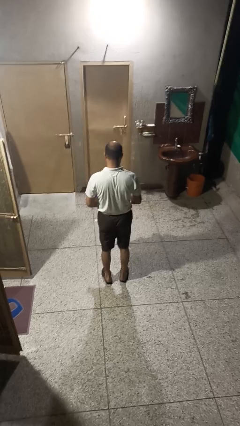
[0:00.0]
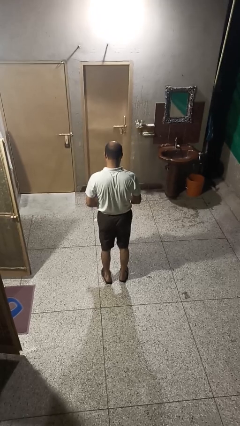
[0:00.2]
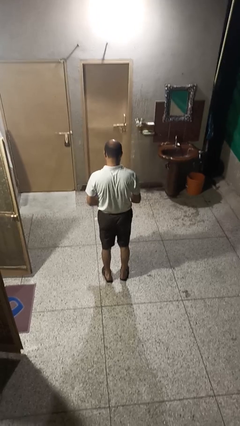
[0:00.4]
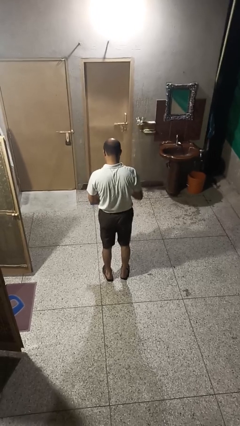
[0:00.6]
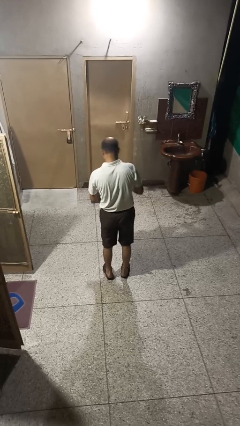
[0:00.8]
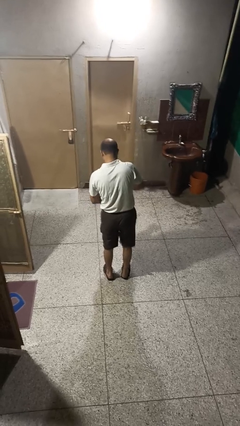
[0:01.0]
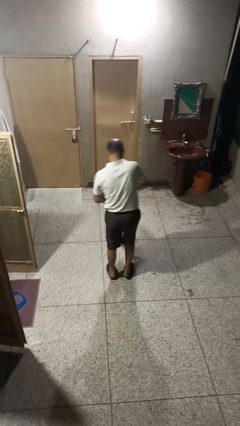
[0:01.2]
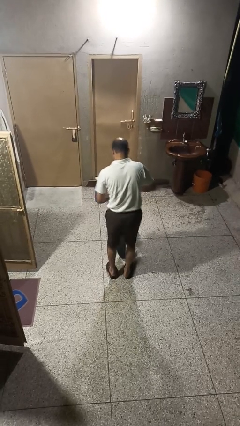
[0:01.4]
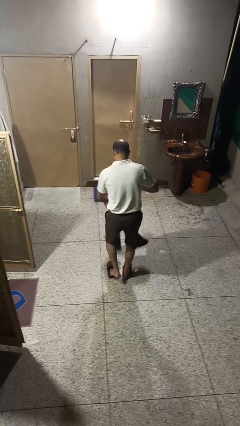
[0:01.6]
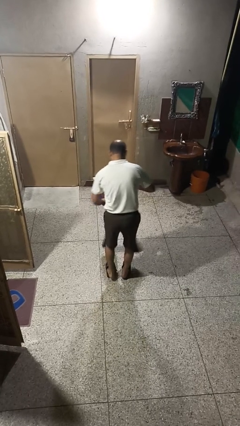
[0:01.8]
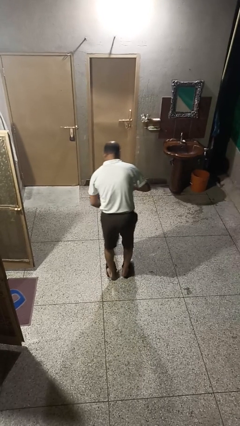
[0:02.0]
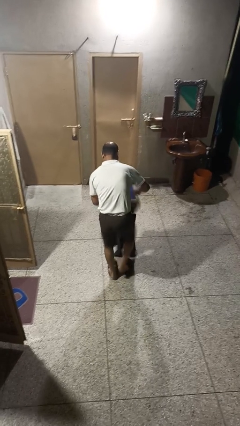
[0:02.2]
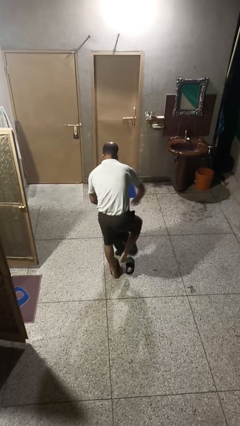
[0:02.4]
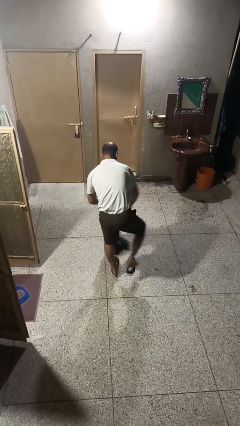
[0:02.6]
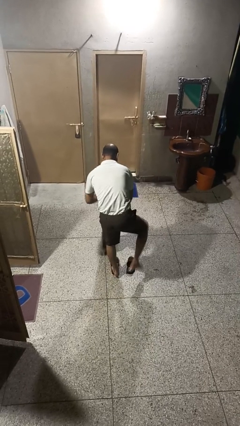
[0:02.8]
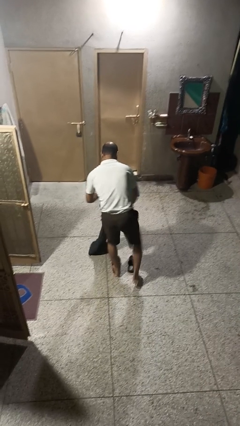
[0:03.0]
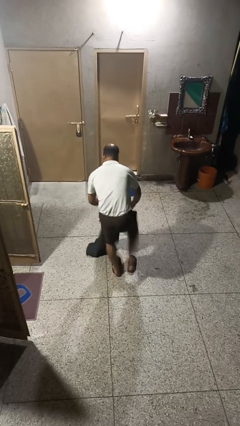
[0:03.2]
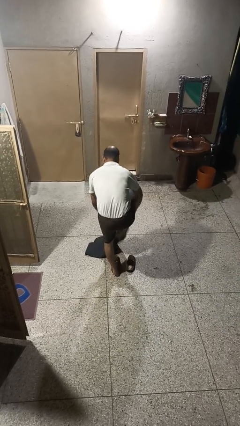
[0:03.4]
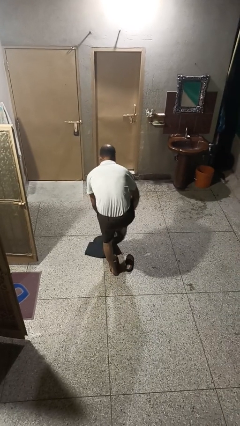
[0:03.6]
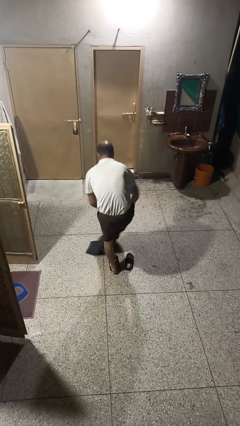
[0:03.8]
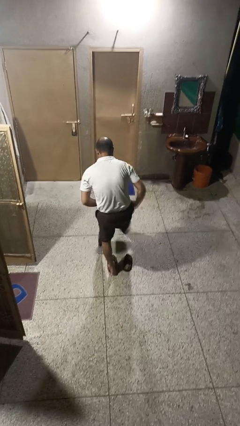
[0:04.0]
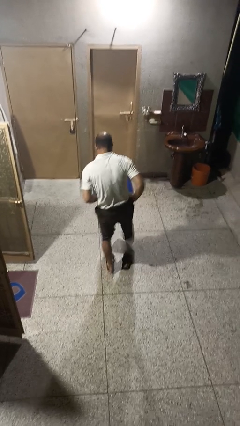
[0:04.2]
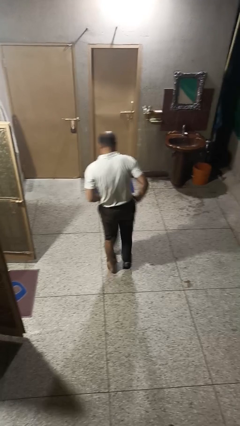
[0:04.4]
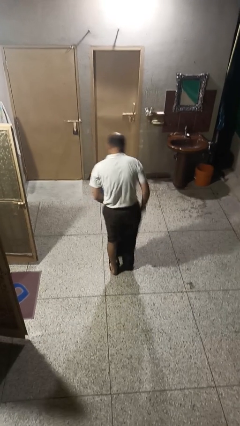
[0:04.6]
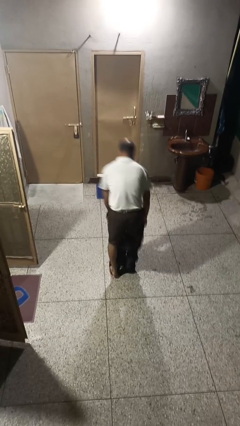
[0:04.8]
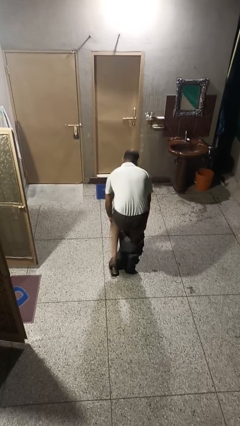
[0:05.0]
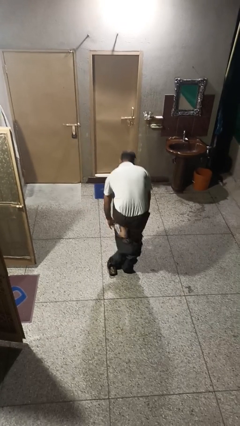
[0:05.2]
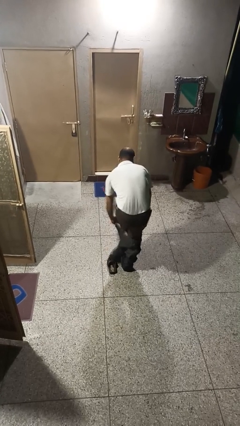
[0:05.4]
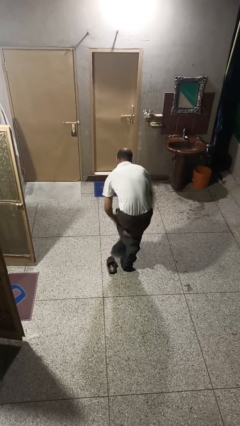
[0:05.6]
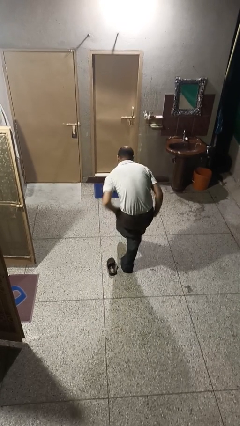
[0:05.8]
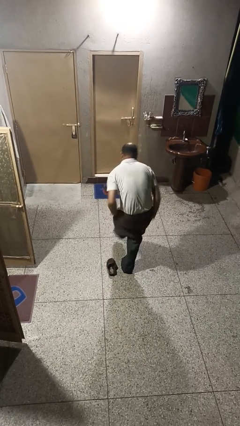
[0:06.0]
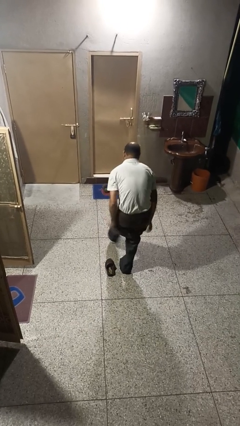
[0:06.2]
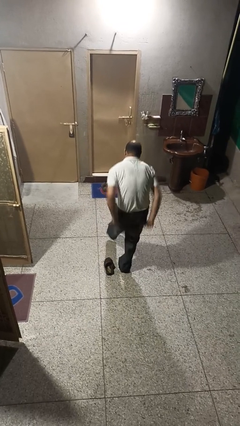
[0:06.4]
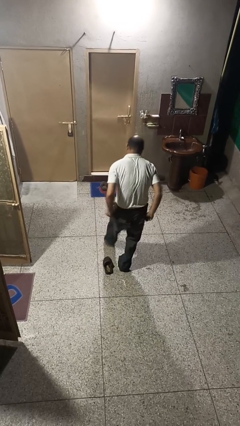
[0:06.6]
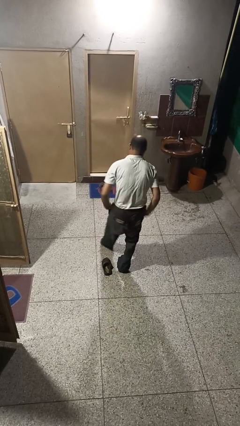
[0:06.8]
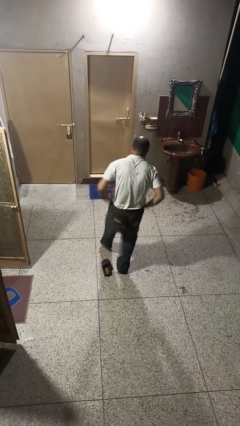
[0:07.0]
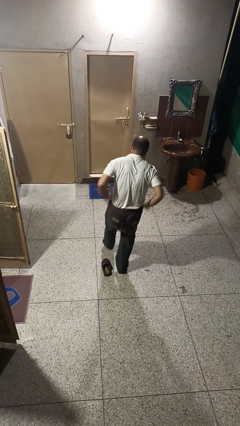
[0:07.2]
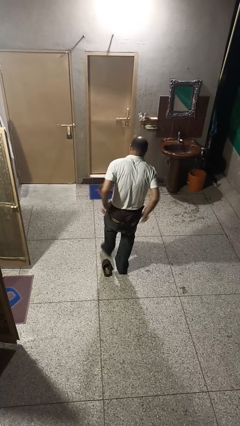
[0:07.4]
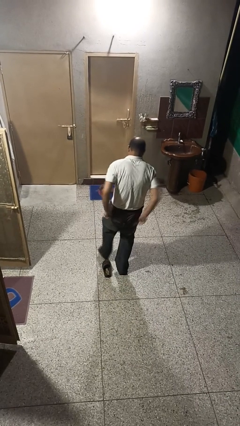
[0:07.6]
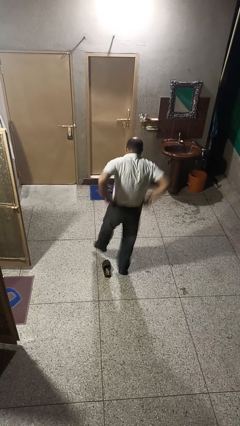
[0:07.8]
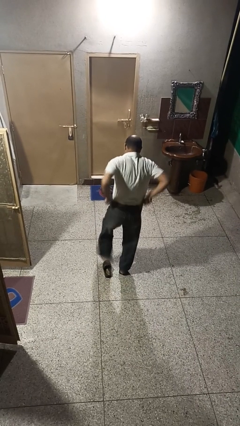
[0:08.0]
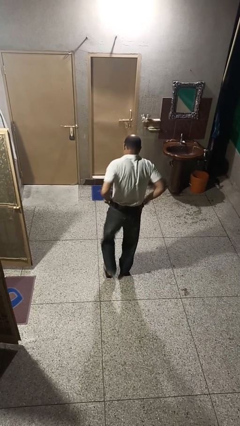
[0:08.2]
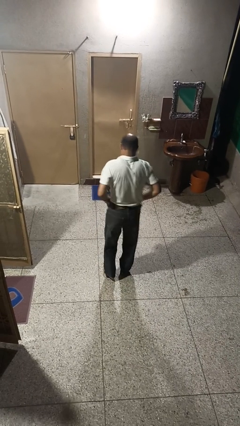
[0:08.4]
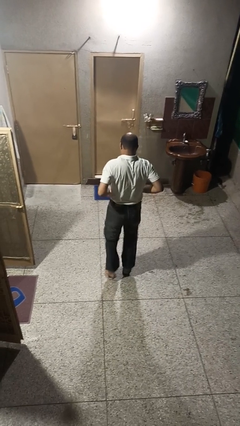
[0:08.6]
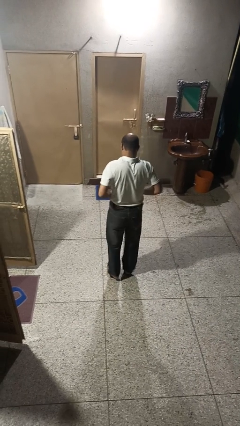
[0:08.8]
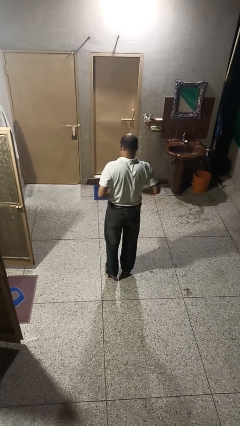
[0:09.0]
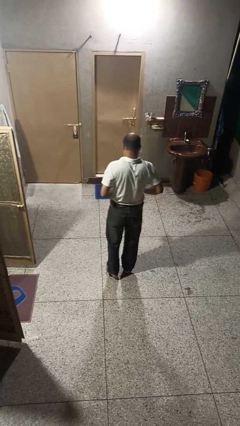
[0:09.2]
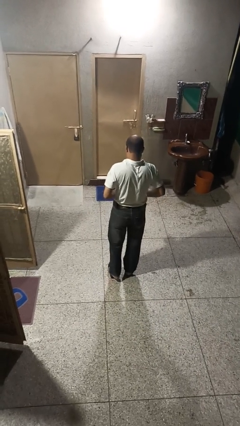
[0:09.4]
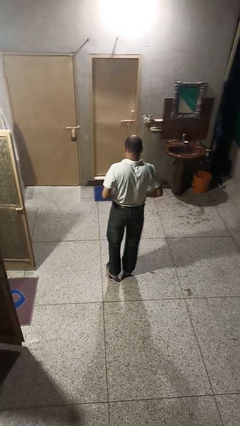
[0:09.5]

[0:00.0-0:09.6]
person puts on pants

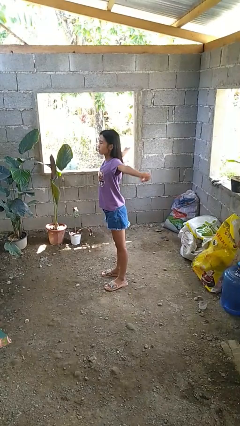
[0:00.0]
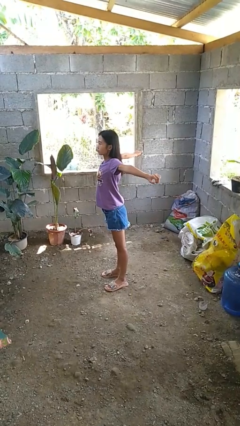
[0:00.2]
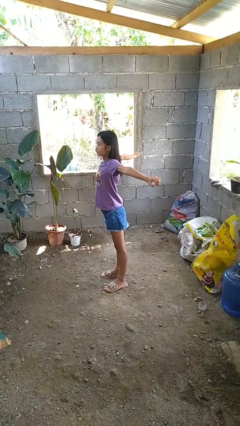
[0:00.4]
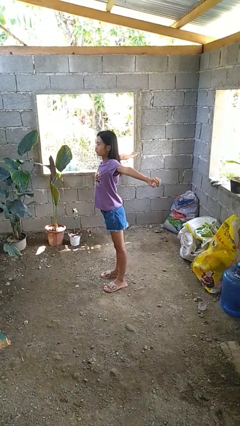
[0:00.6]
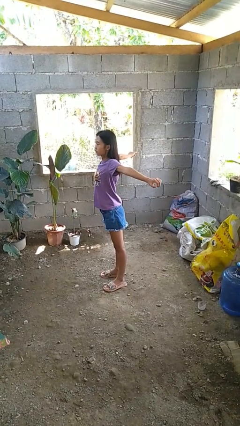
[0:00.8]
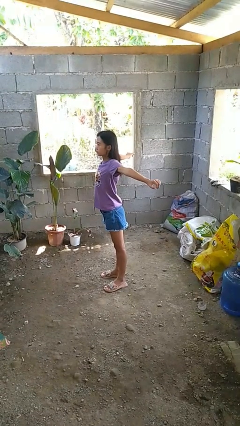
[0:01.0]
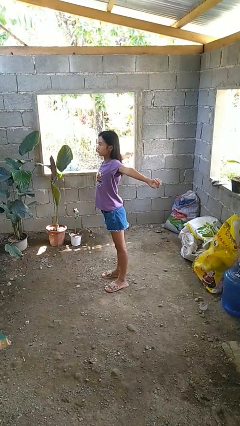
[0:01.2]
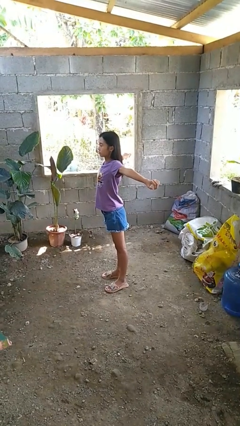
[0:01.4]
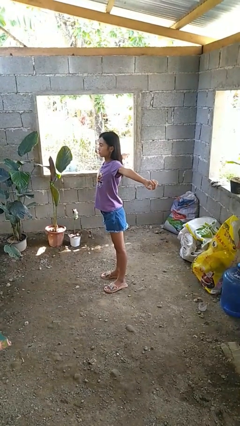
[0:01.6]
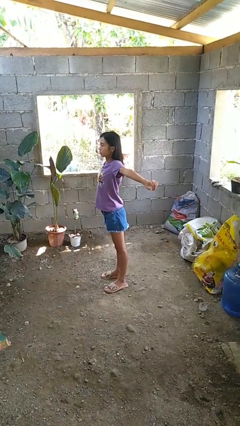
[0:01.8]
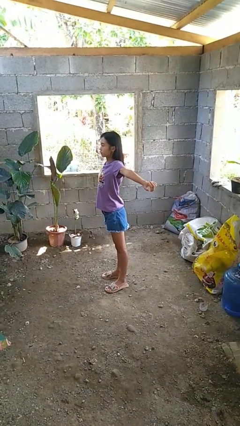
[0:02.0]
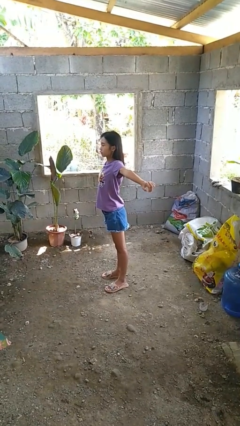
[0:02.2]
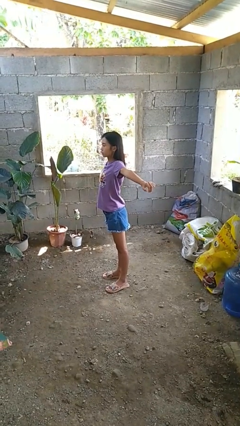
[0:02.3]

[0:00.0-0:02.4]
person stretches arms to side

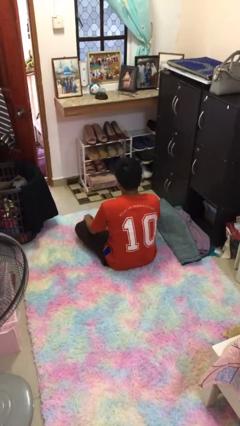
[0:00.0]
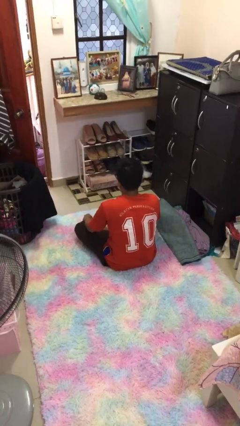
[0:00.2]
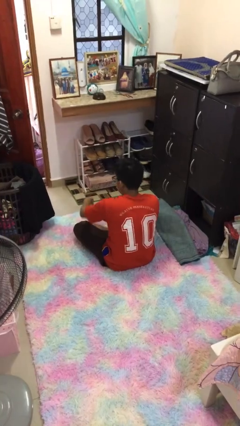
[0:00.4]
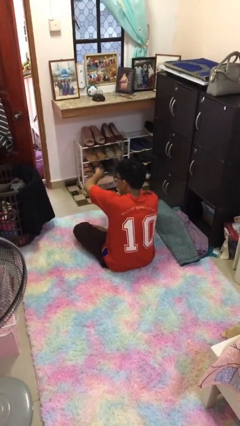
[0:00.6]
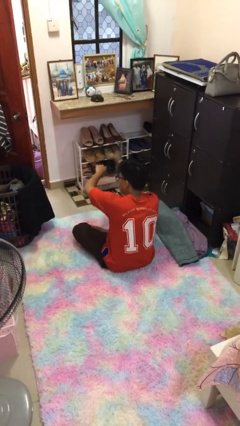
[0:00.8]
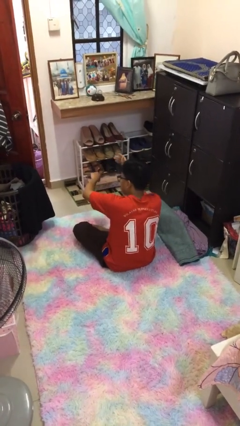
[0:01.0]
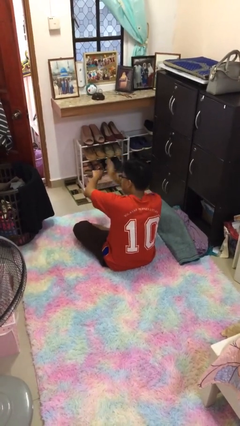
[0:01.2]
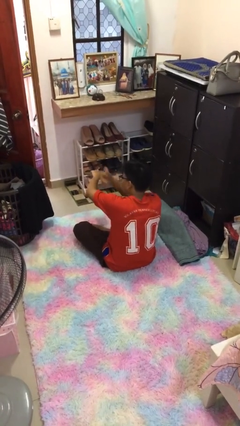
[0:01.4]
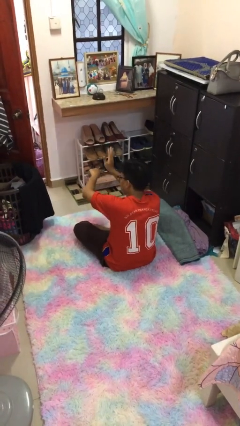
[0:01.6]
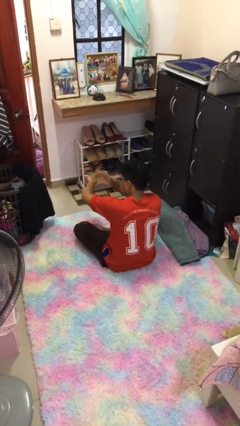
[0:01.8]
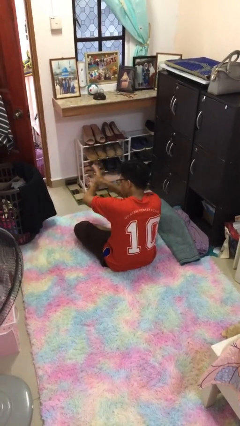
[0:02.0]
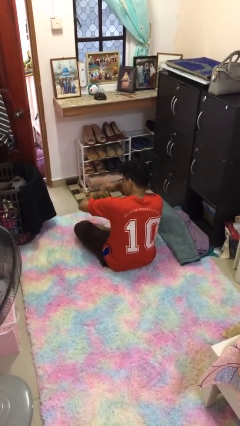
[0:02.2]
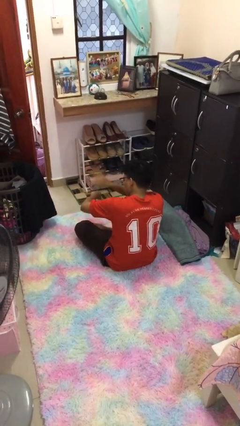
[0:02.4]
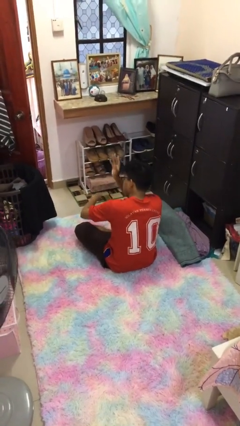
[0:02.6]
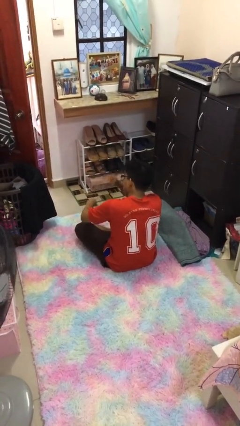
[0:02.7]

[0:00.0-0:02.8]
person swats bug

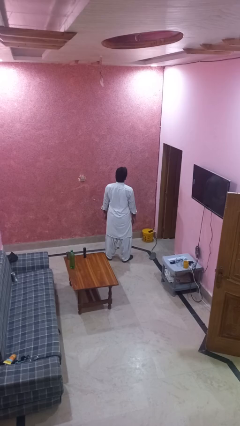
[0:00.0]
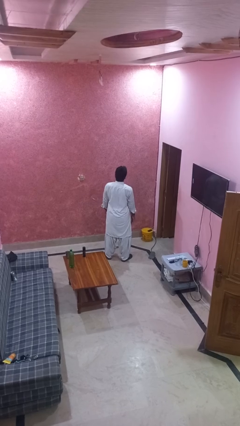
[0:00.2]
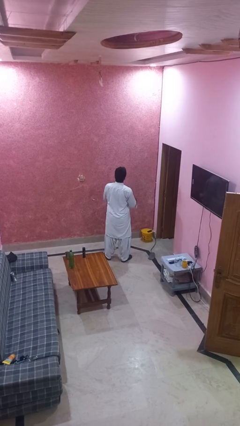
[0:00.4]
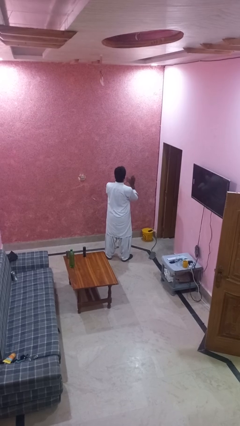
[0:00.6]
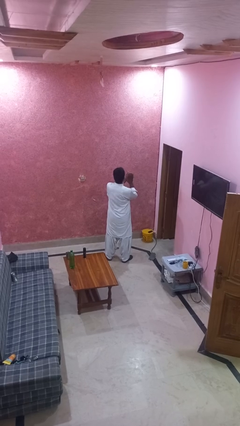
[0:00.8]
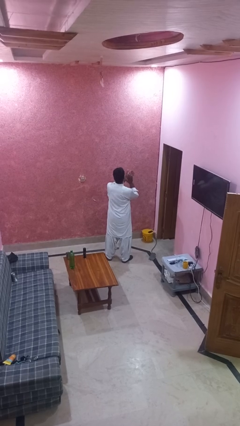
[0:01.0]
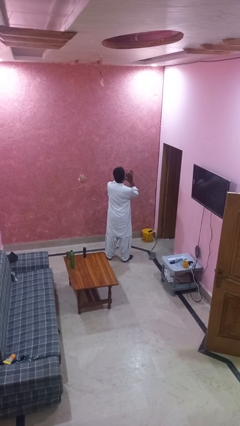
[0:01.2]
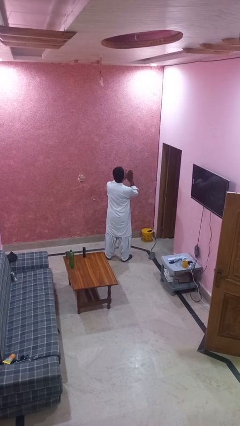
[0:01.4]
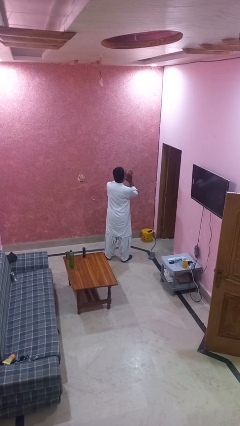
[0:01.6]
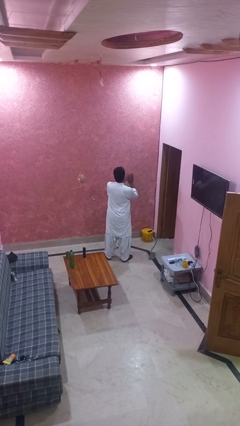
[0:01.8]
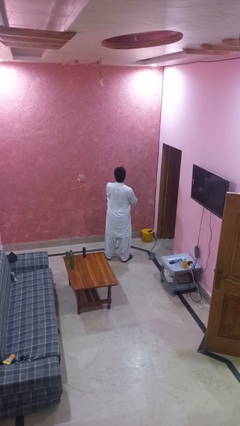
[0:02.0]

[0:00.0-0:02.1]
person claps hands

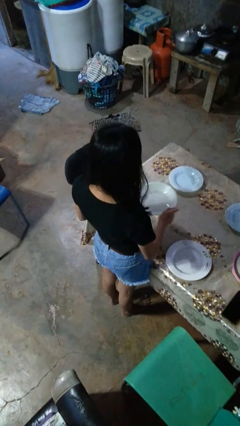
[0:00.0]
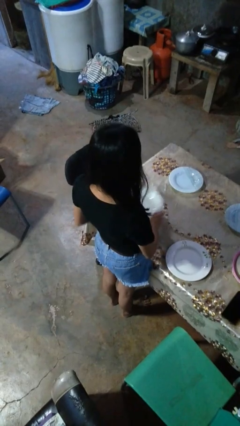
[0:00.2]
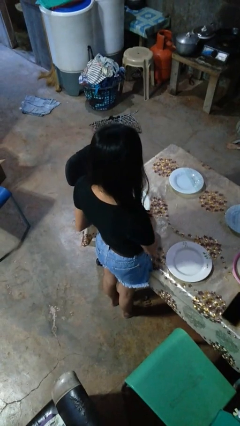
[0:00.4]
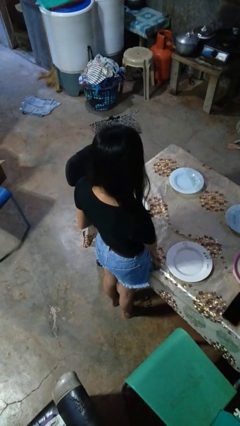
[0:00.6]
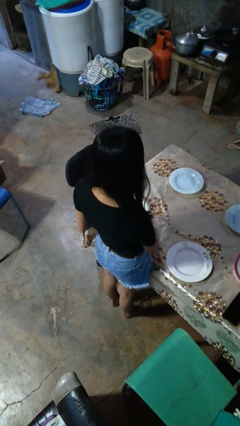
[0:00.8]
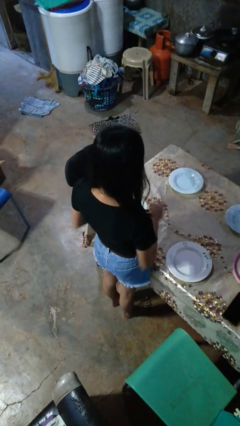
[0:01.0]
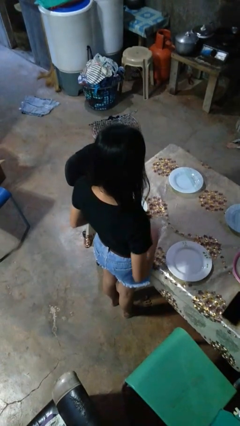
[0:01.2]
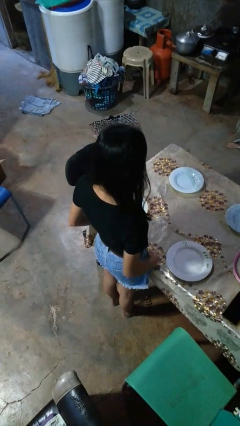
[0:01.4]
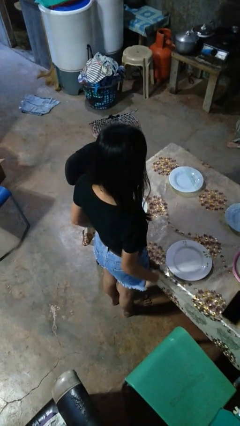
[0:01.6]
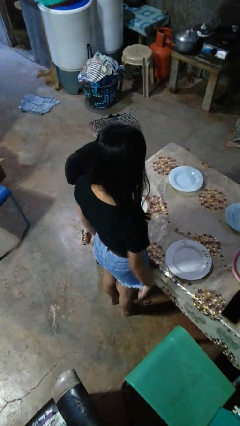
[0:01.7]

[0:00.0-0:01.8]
person sets table
